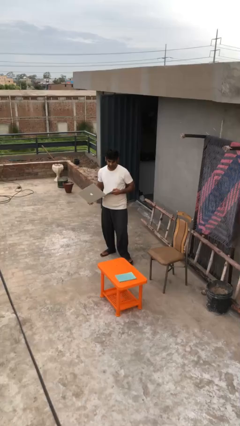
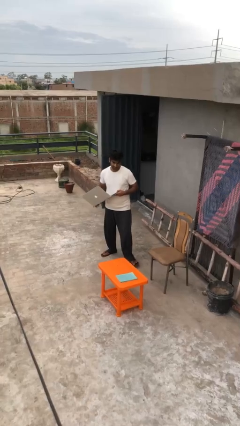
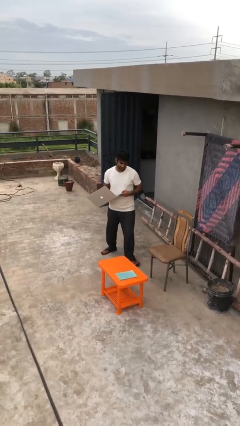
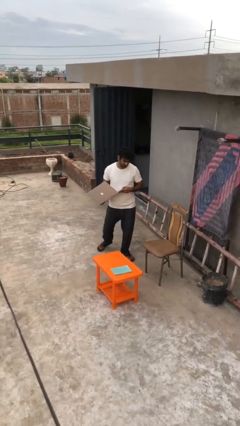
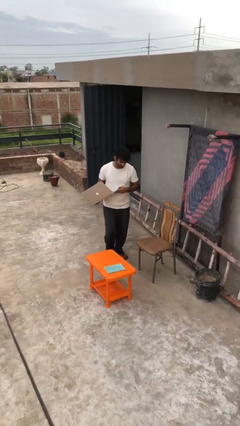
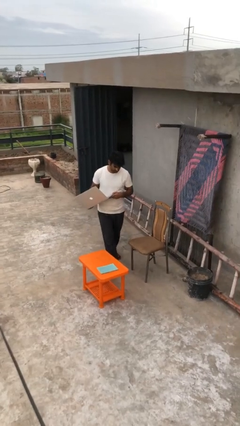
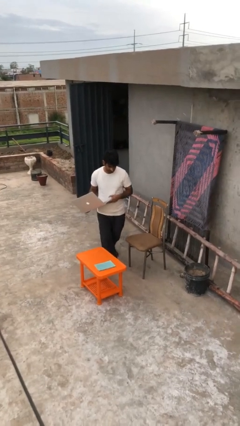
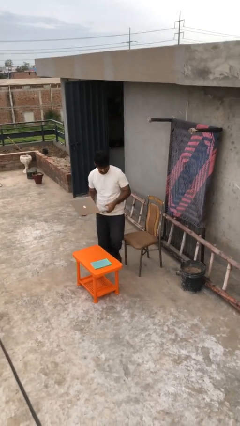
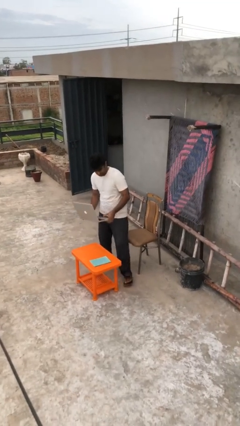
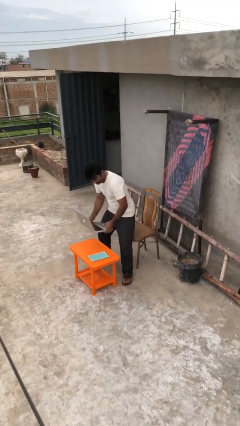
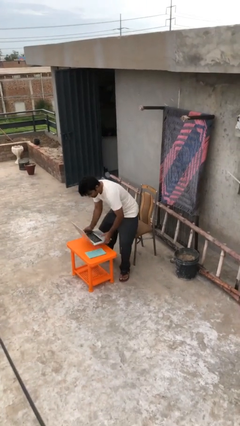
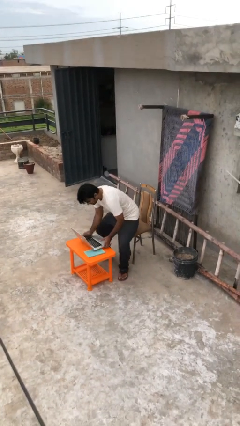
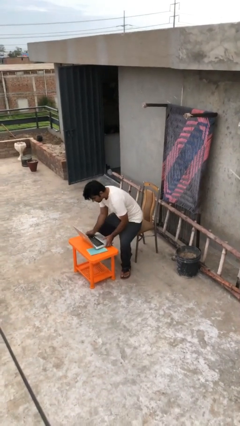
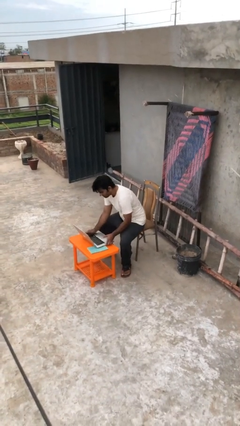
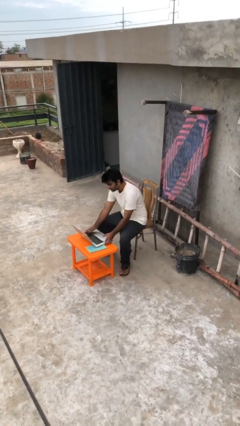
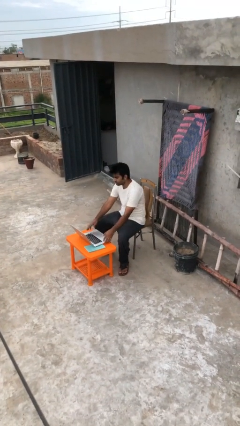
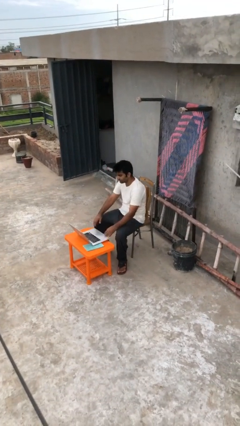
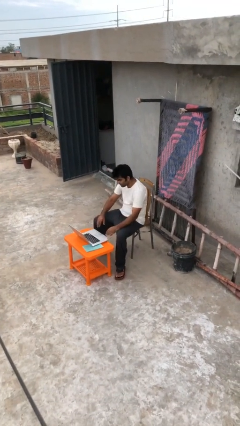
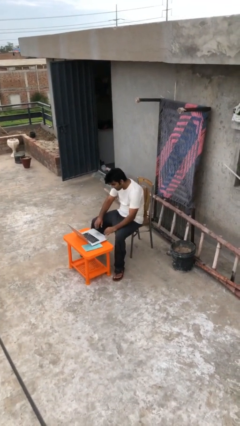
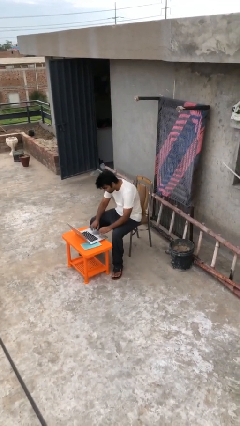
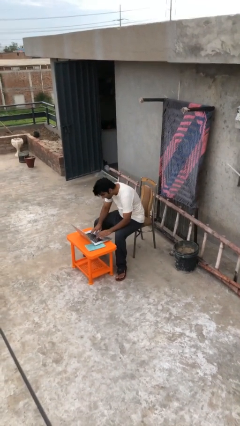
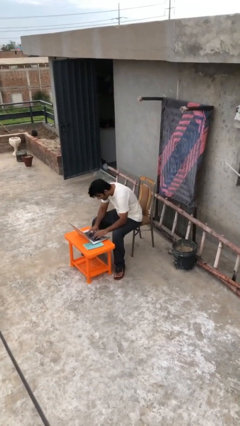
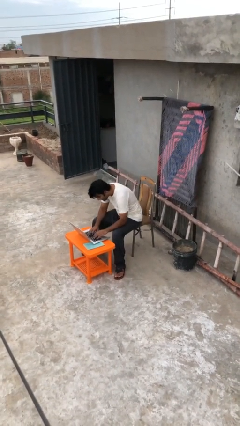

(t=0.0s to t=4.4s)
person sits down

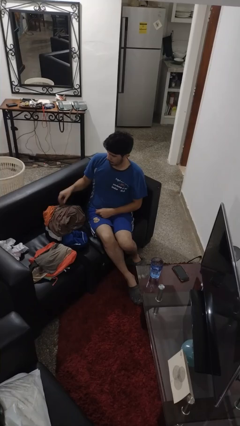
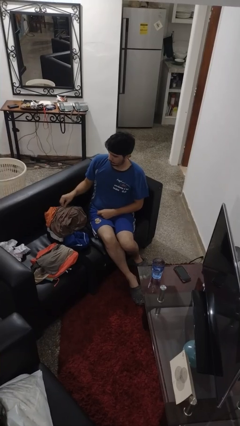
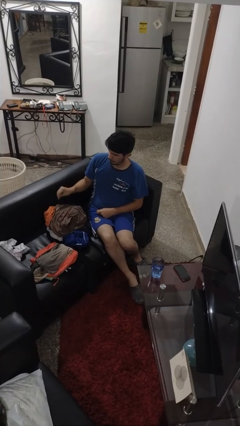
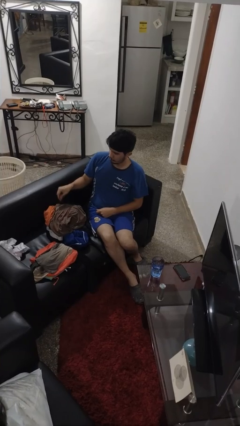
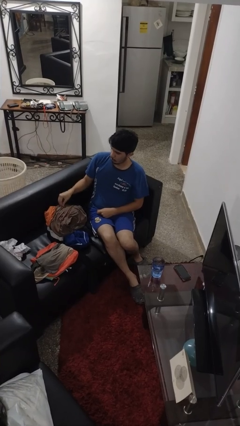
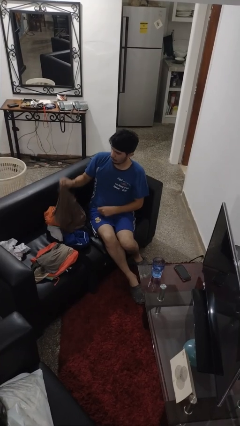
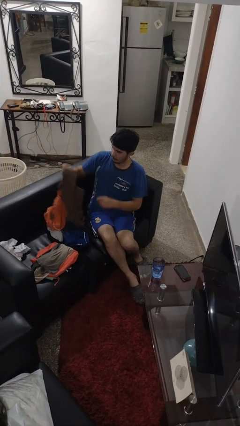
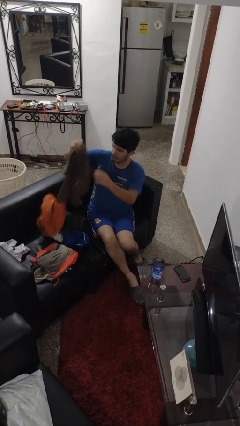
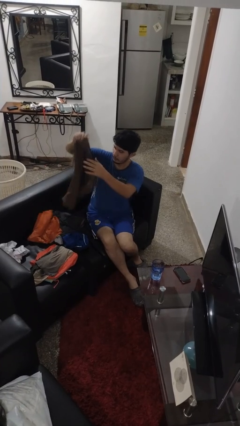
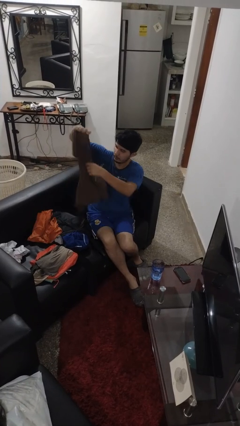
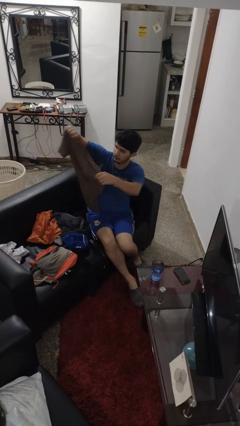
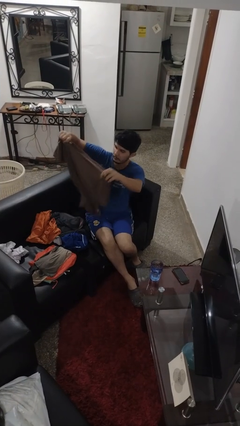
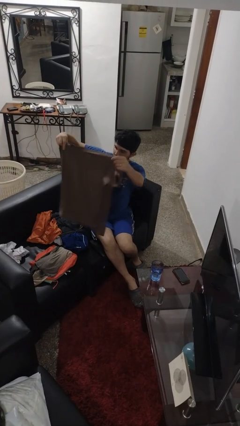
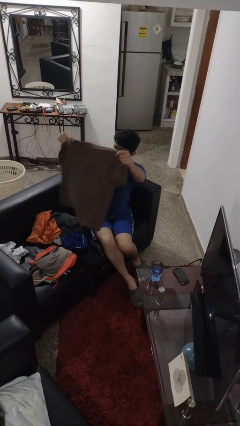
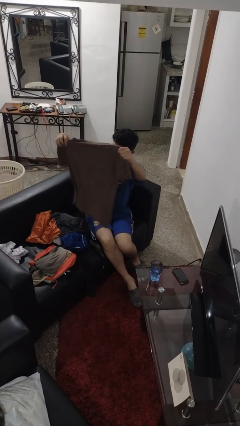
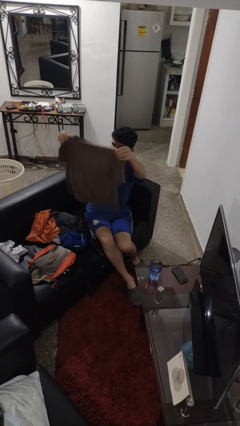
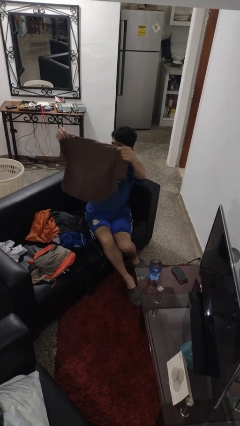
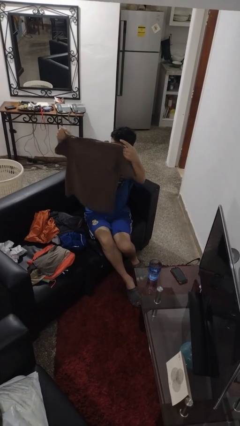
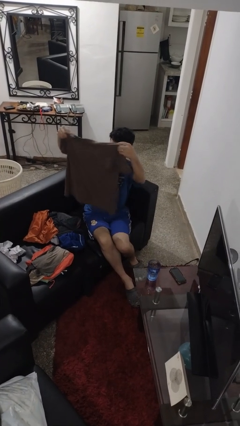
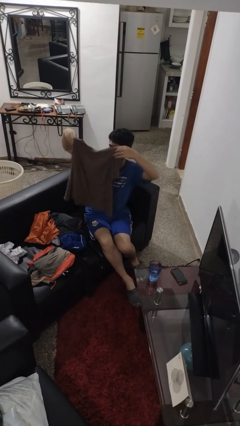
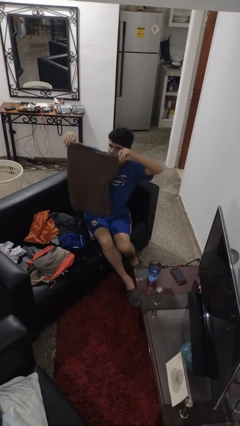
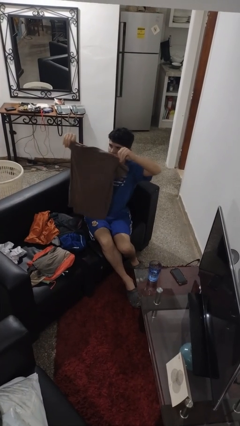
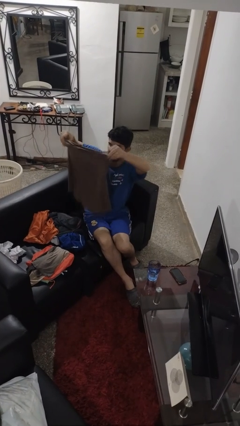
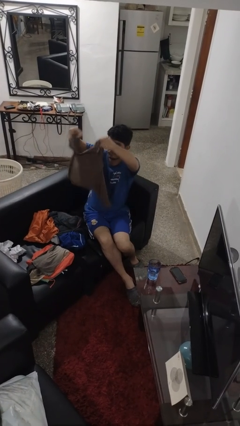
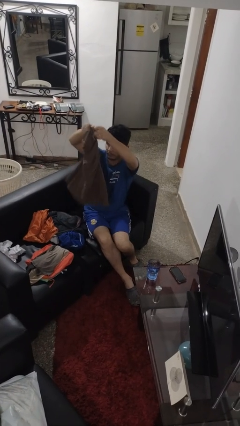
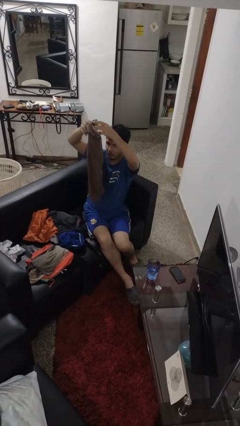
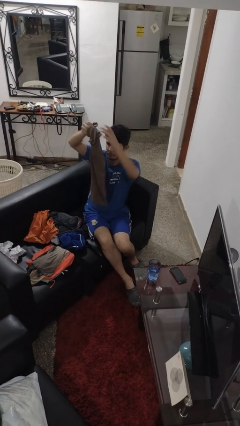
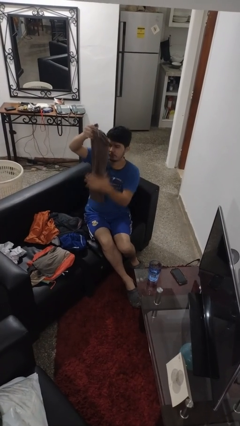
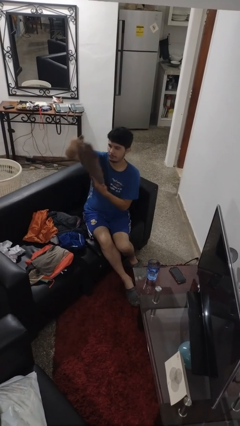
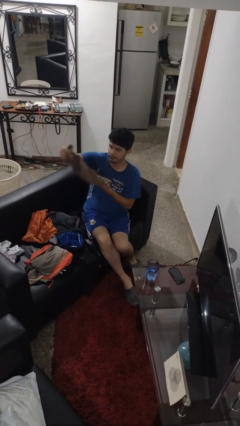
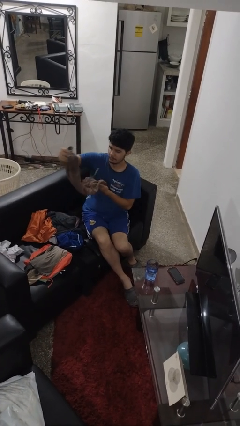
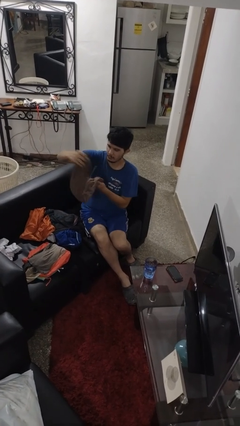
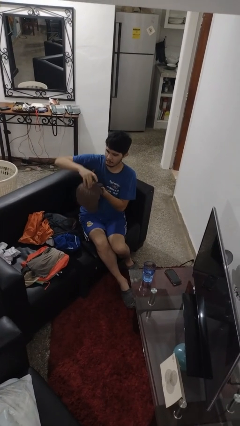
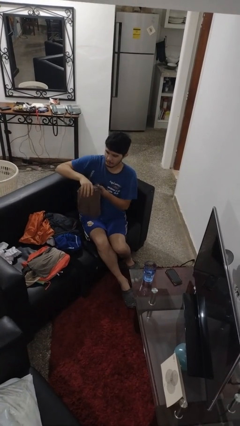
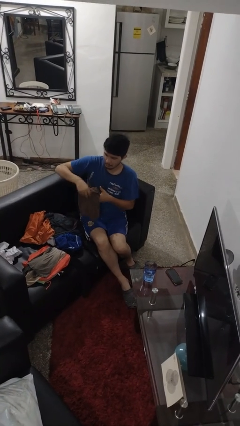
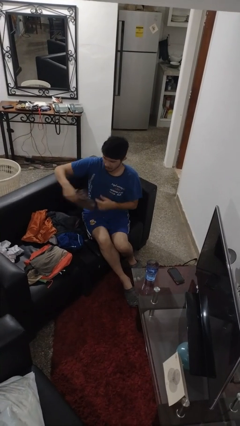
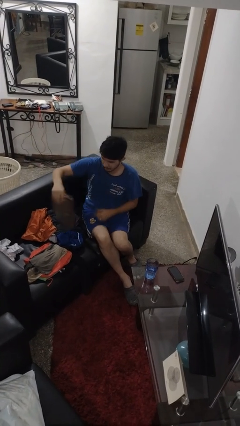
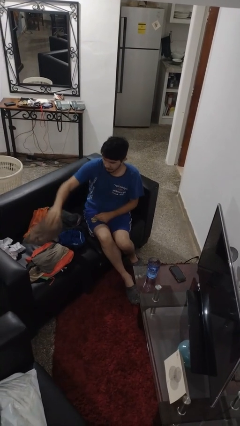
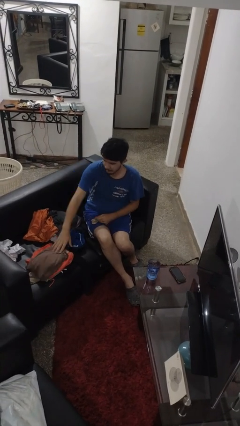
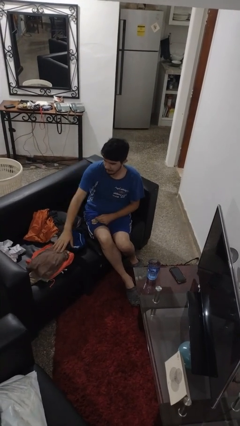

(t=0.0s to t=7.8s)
person folds shirt

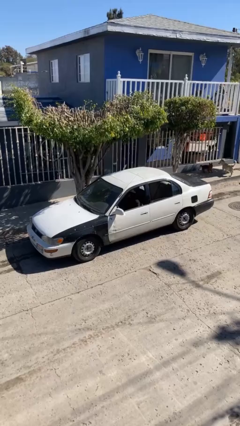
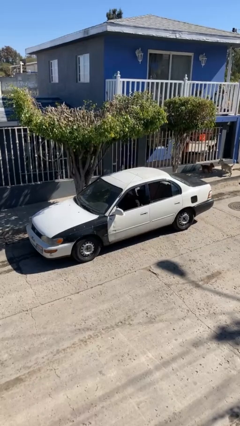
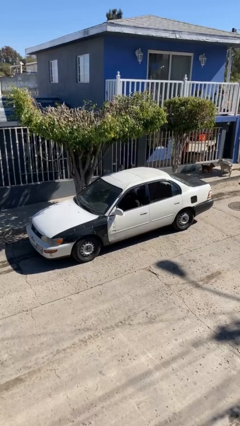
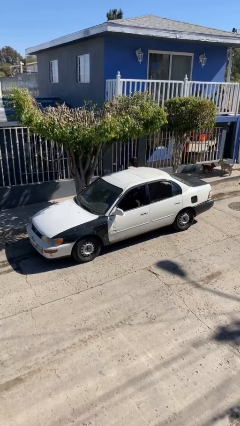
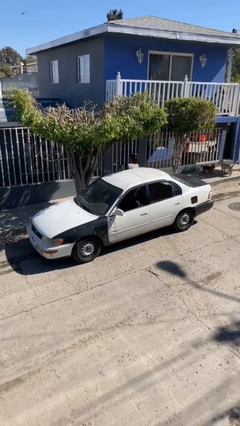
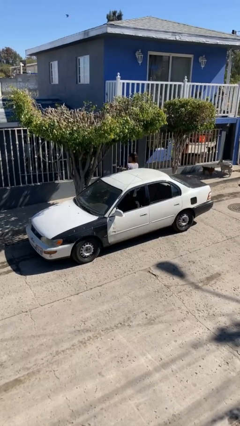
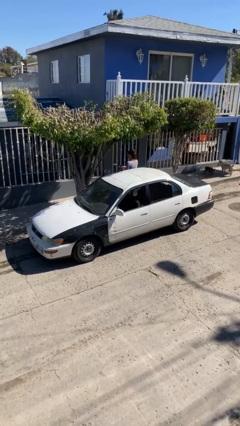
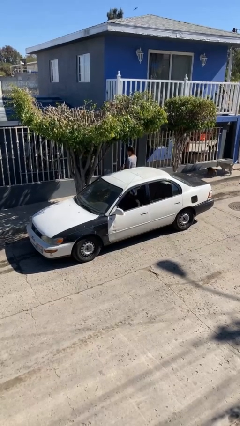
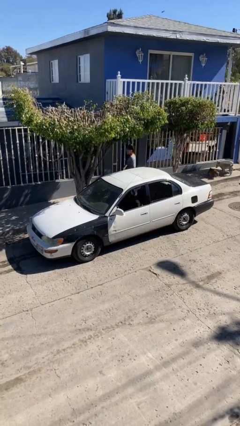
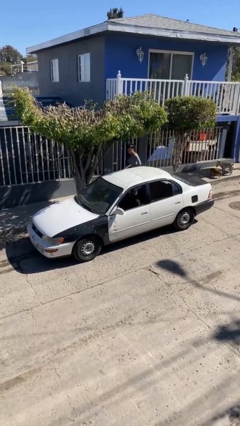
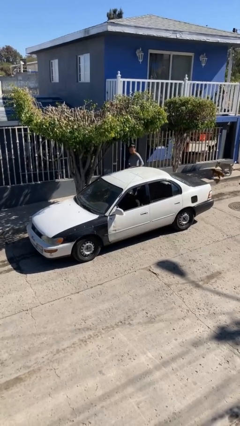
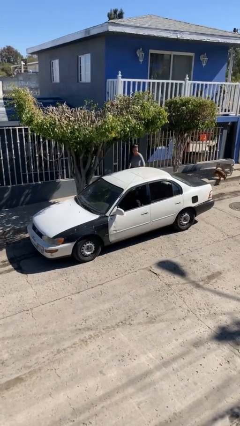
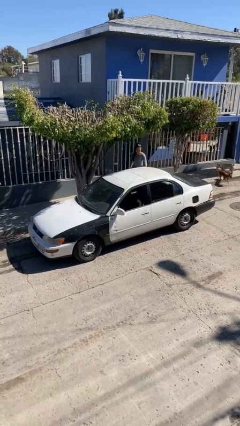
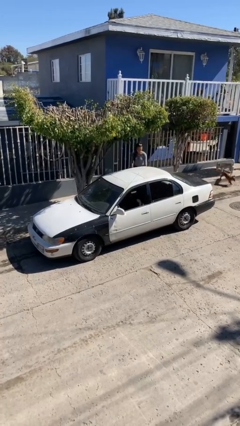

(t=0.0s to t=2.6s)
car drops off person

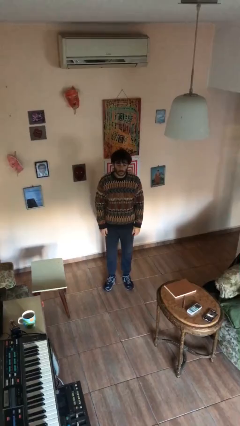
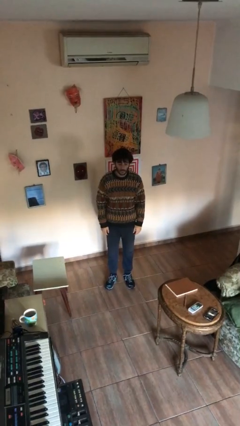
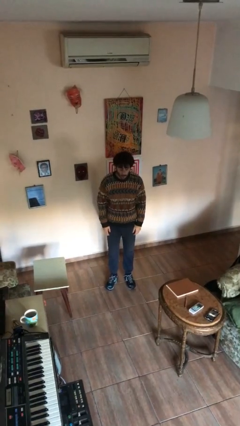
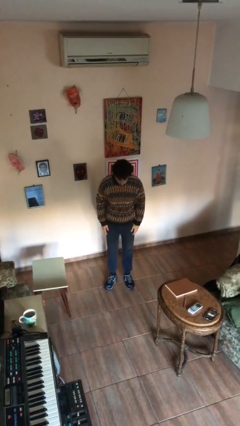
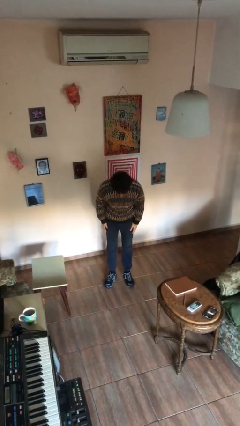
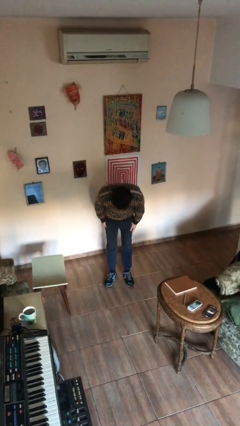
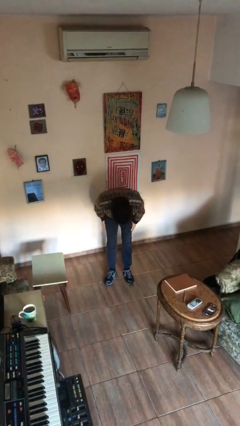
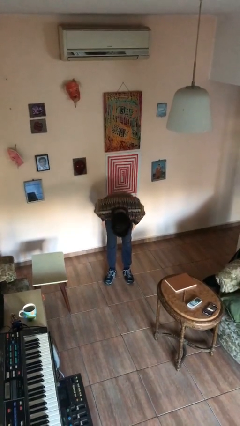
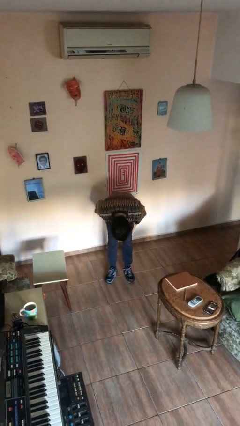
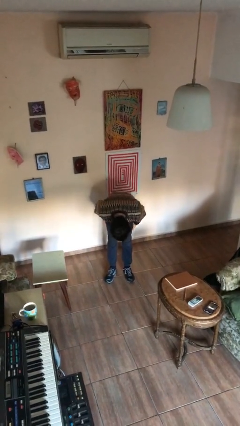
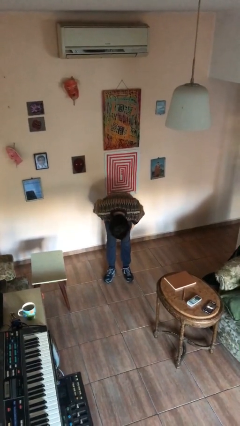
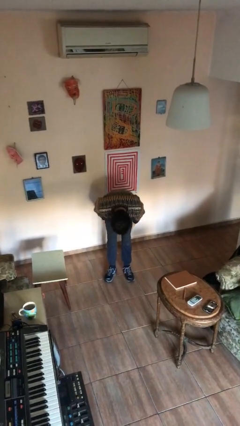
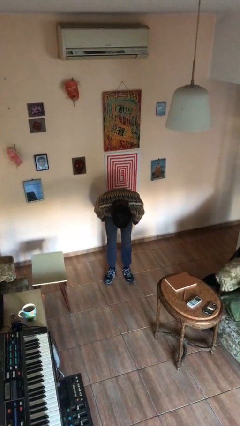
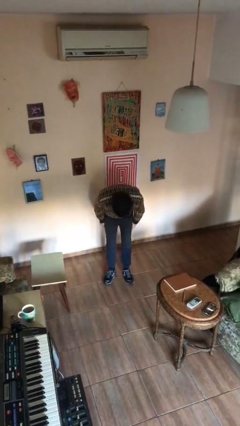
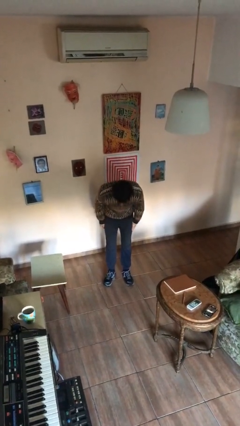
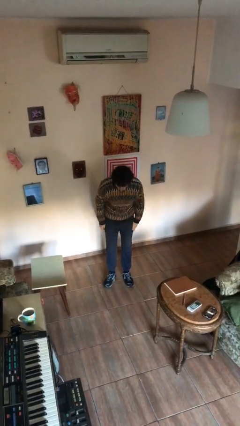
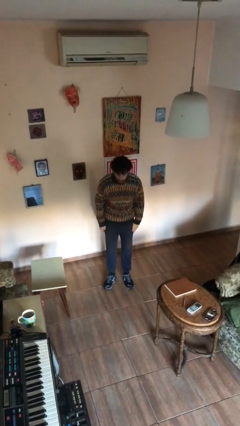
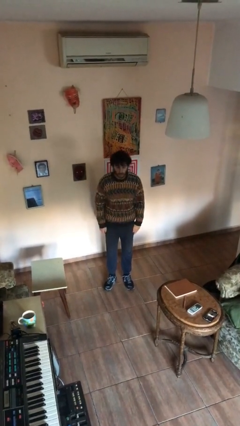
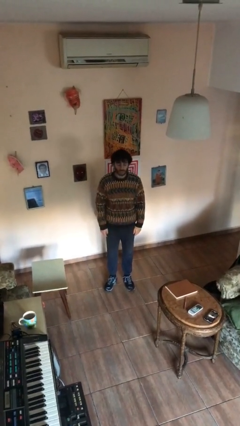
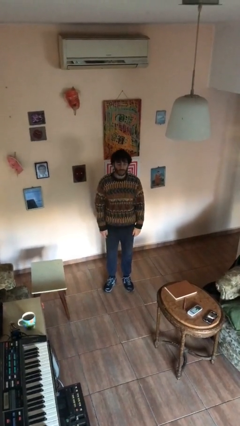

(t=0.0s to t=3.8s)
person bows
